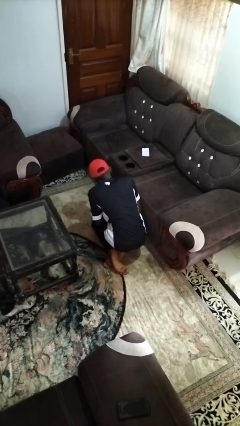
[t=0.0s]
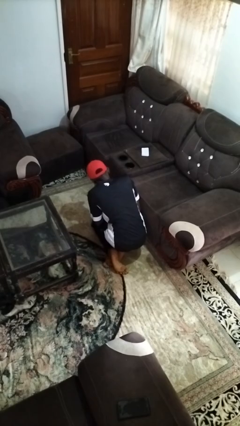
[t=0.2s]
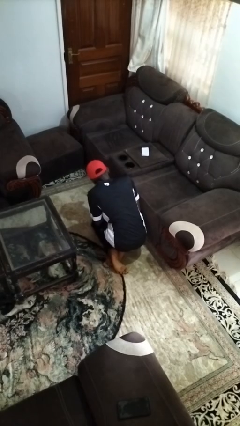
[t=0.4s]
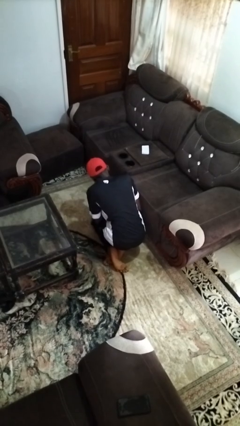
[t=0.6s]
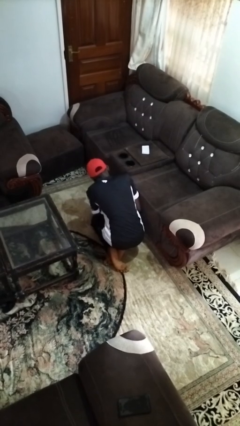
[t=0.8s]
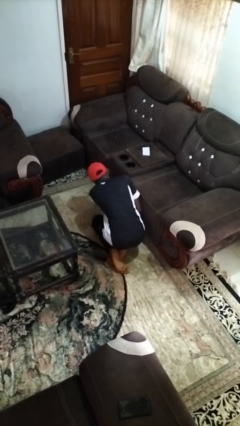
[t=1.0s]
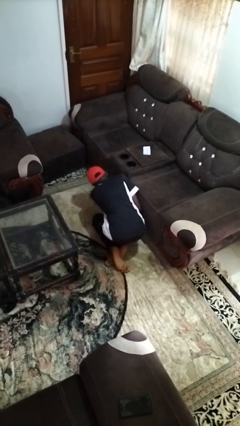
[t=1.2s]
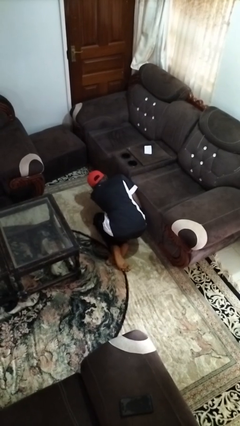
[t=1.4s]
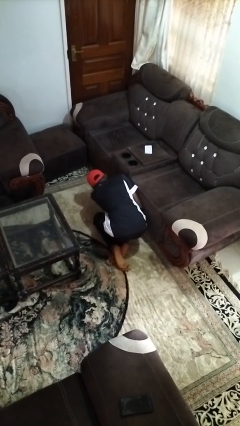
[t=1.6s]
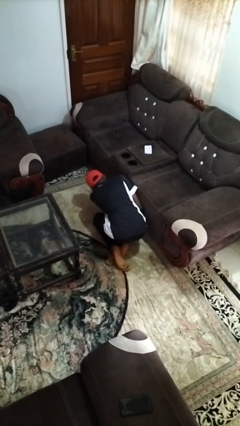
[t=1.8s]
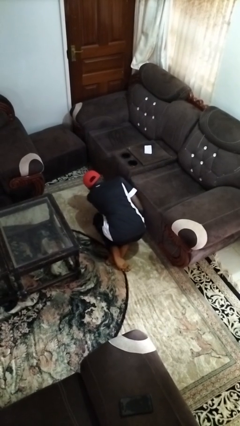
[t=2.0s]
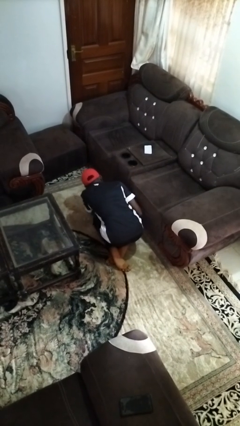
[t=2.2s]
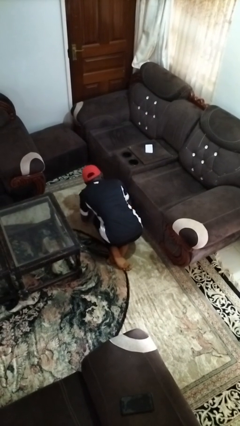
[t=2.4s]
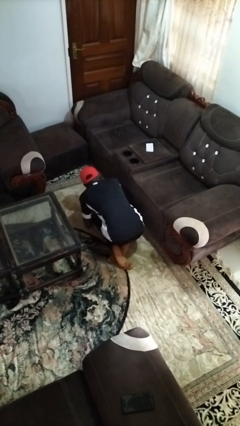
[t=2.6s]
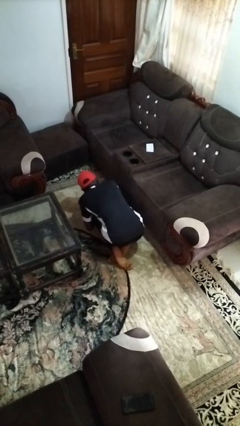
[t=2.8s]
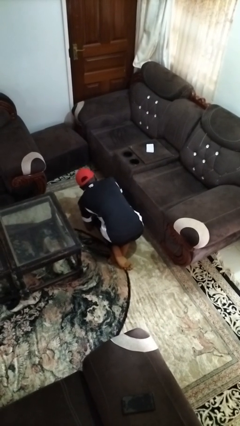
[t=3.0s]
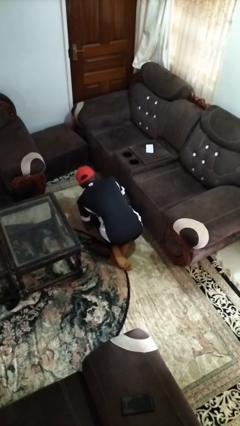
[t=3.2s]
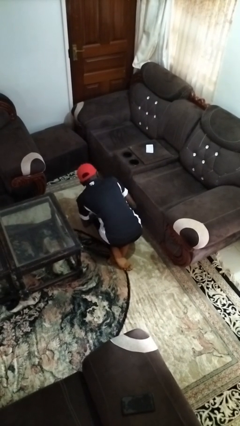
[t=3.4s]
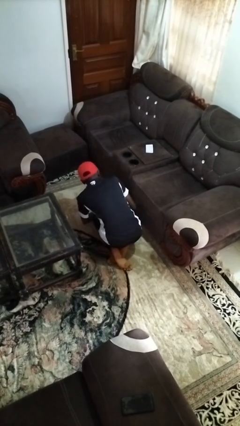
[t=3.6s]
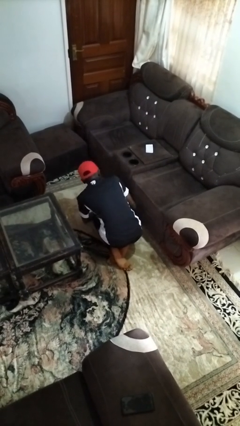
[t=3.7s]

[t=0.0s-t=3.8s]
person searches under couch

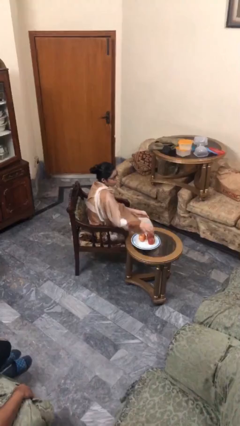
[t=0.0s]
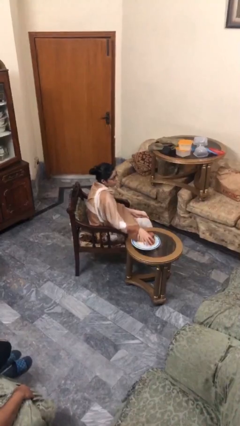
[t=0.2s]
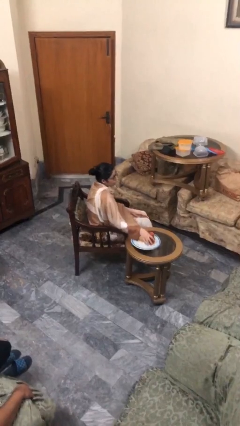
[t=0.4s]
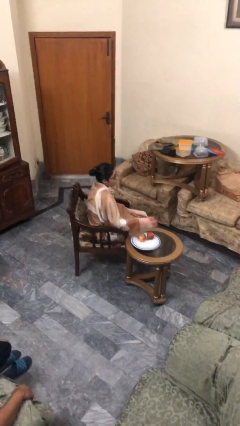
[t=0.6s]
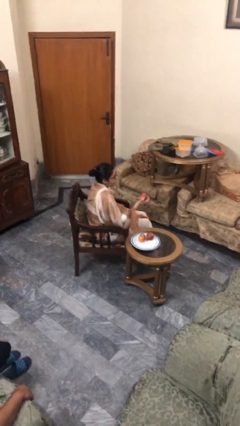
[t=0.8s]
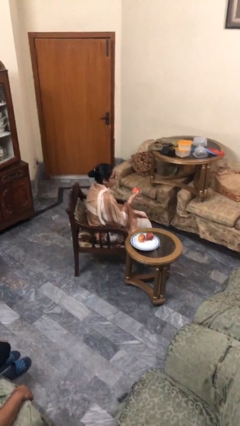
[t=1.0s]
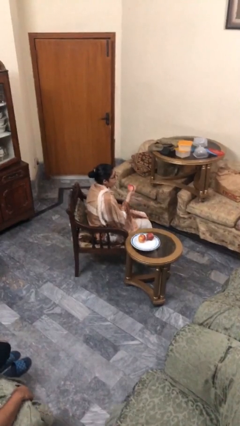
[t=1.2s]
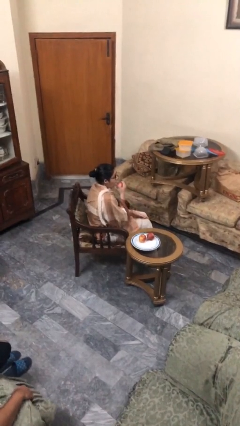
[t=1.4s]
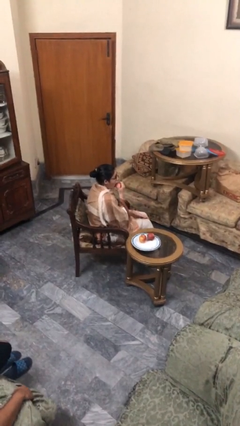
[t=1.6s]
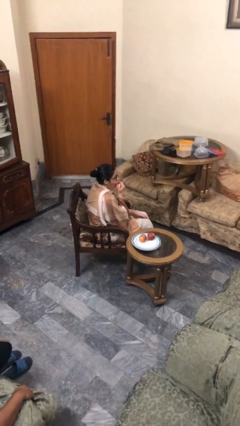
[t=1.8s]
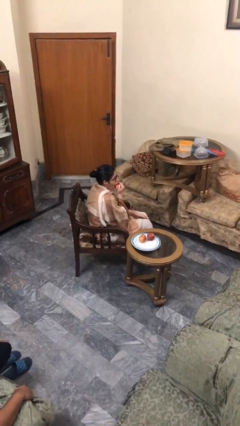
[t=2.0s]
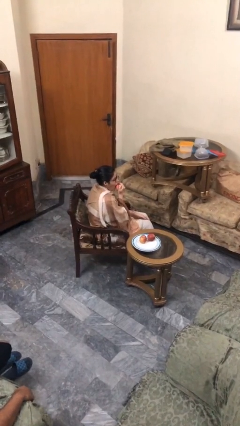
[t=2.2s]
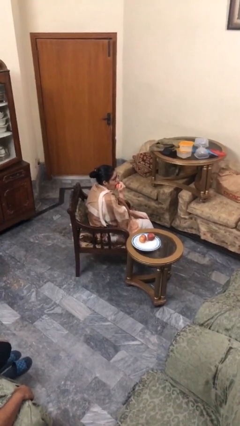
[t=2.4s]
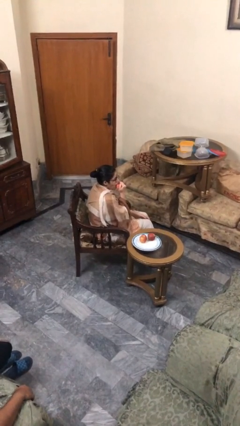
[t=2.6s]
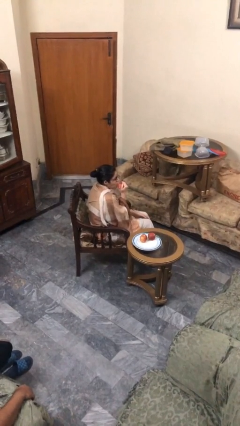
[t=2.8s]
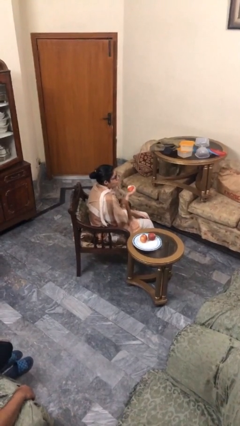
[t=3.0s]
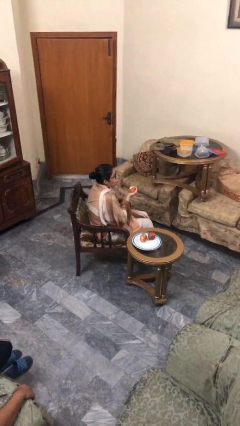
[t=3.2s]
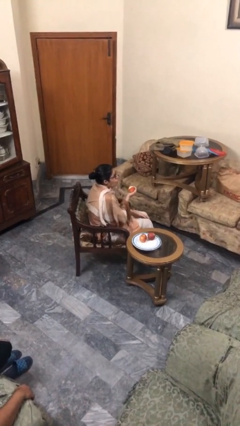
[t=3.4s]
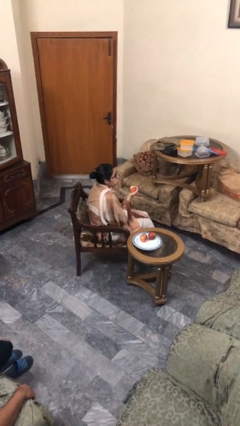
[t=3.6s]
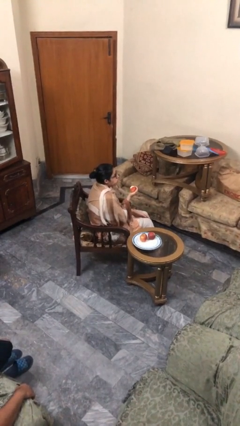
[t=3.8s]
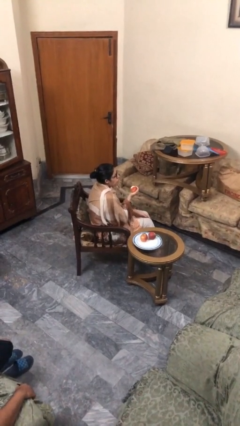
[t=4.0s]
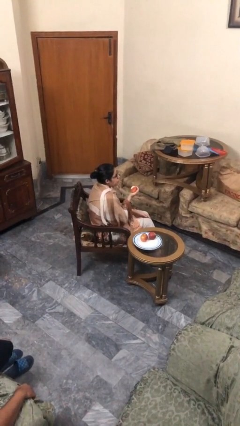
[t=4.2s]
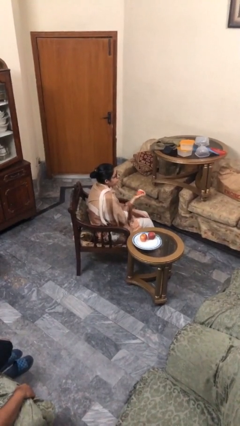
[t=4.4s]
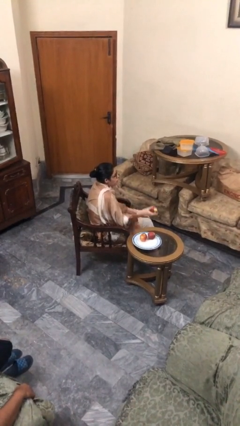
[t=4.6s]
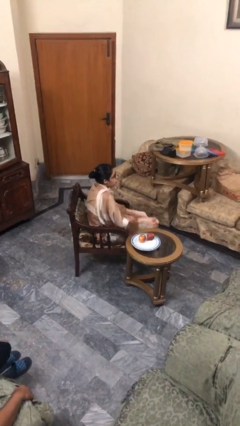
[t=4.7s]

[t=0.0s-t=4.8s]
person eats apple

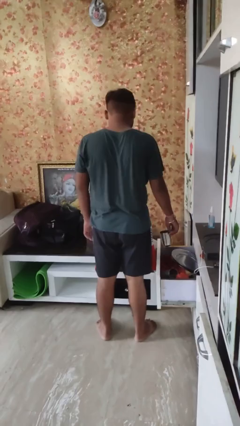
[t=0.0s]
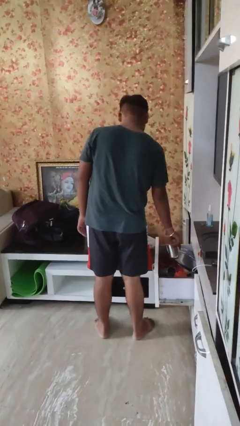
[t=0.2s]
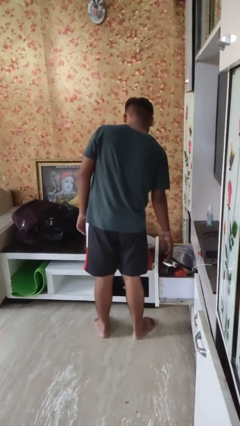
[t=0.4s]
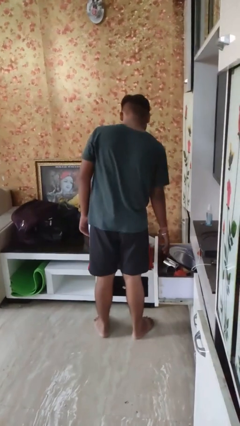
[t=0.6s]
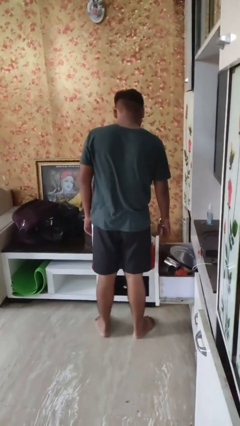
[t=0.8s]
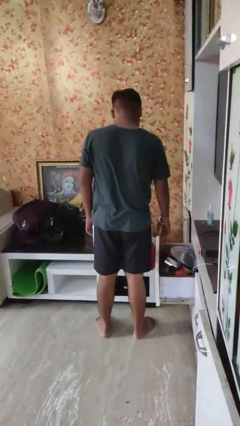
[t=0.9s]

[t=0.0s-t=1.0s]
person puts object into kitchen drawer

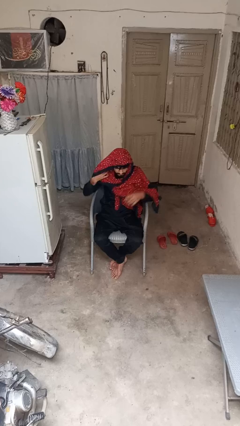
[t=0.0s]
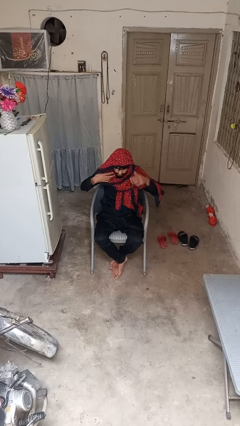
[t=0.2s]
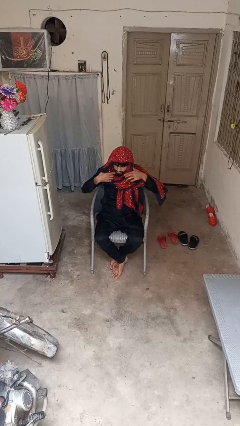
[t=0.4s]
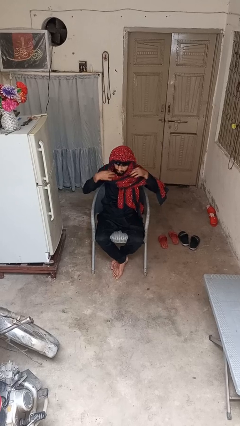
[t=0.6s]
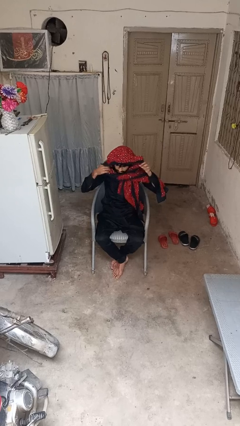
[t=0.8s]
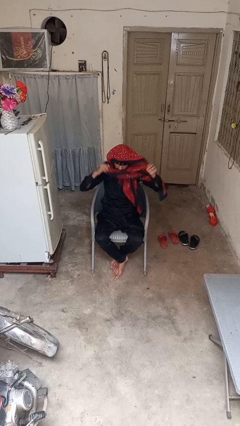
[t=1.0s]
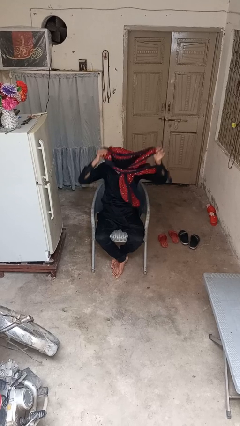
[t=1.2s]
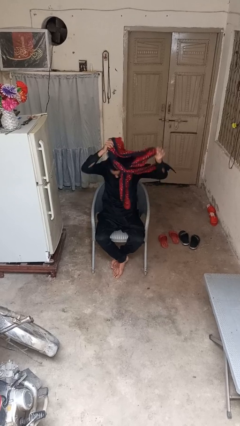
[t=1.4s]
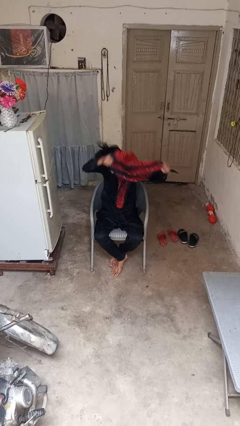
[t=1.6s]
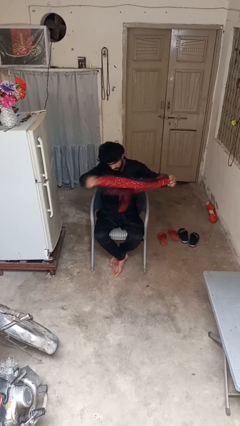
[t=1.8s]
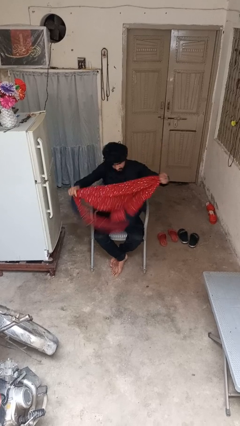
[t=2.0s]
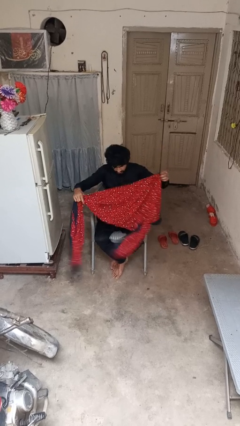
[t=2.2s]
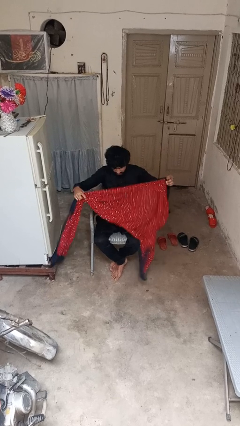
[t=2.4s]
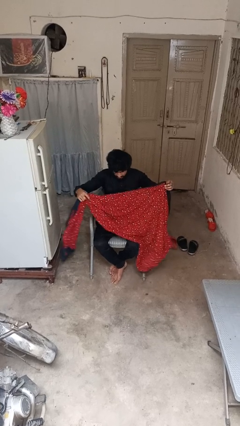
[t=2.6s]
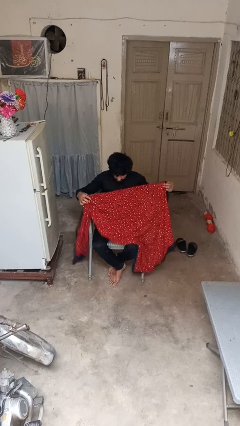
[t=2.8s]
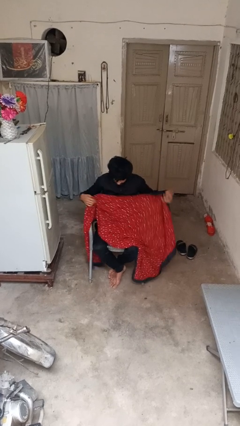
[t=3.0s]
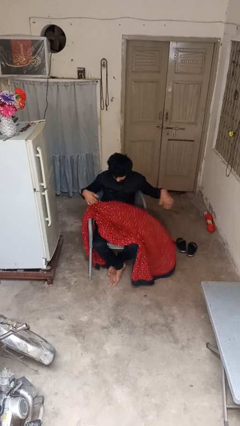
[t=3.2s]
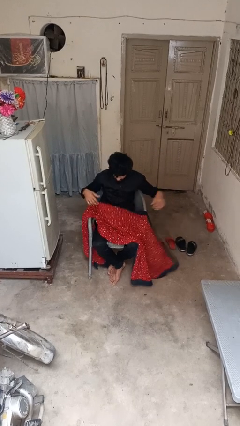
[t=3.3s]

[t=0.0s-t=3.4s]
person takes off scarf

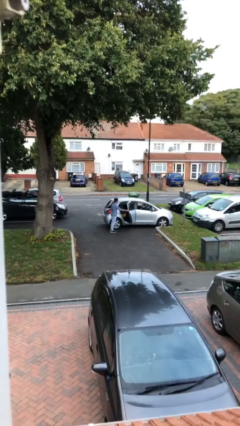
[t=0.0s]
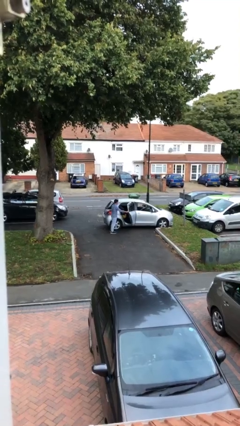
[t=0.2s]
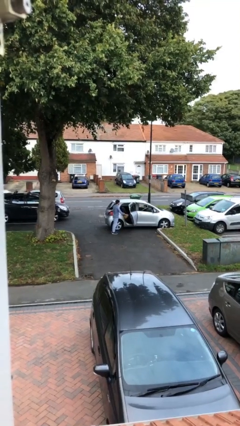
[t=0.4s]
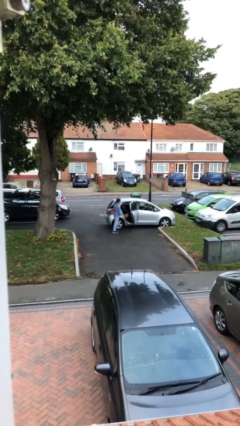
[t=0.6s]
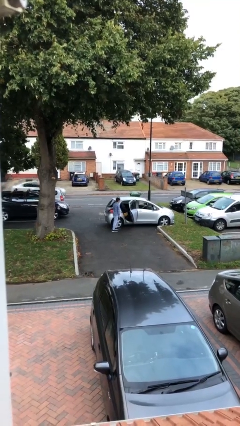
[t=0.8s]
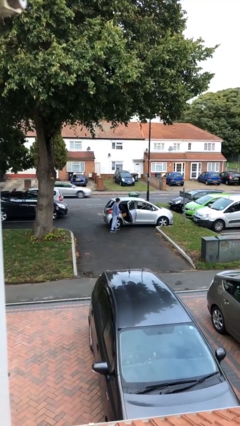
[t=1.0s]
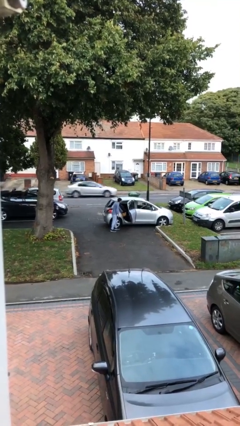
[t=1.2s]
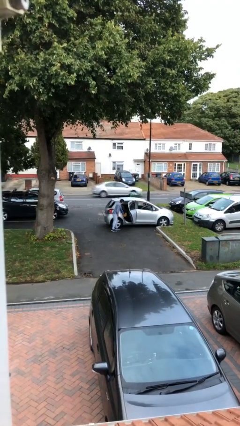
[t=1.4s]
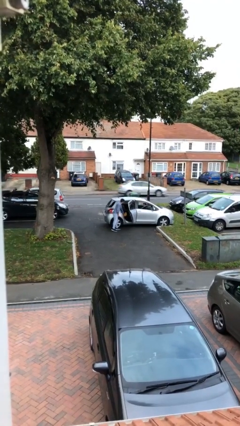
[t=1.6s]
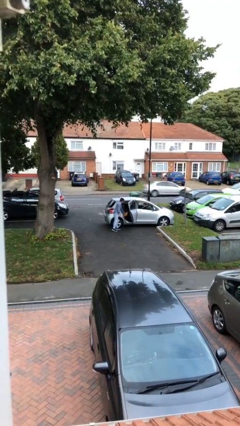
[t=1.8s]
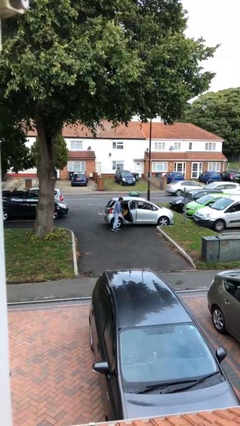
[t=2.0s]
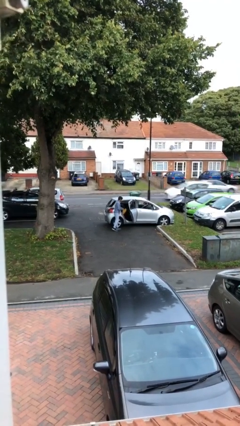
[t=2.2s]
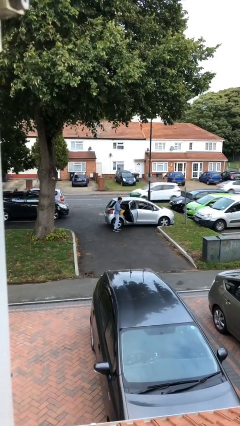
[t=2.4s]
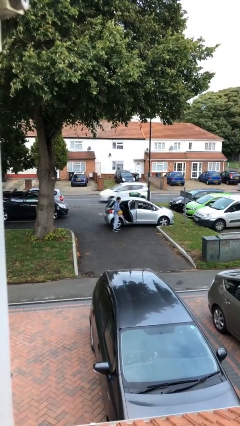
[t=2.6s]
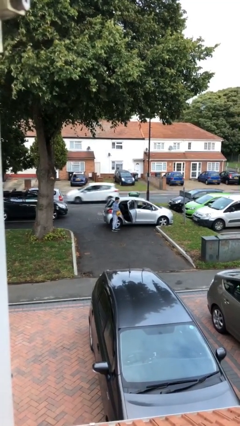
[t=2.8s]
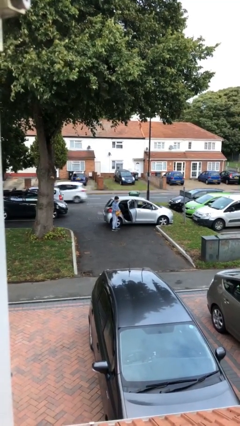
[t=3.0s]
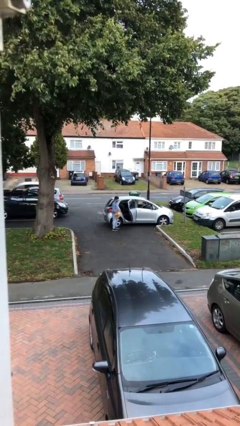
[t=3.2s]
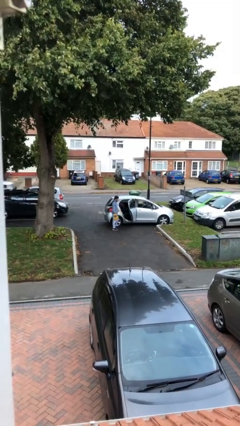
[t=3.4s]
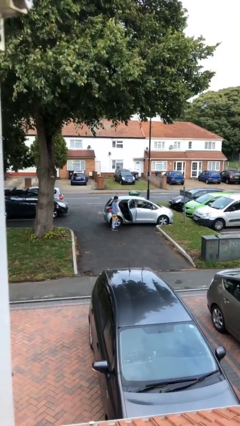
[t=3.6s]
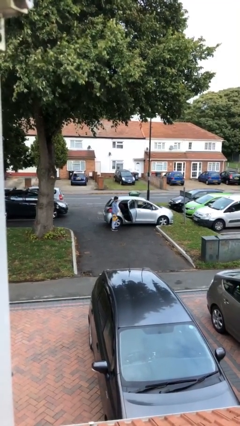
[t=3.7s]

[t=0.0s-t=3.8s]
person unloads car

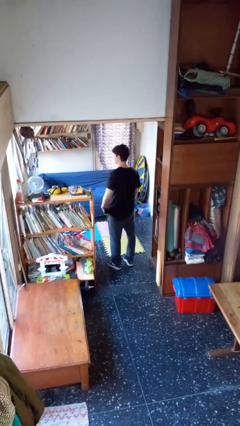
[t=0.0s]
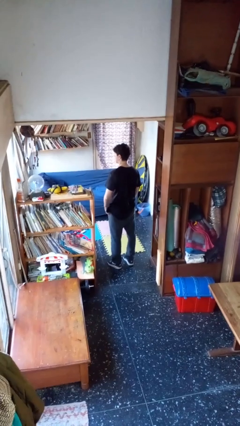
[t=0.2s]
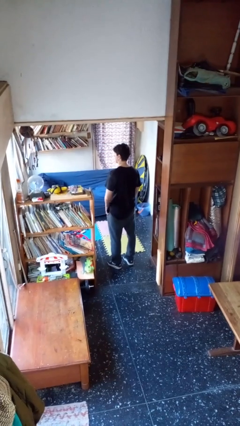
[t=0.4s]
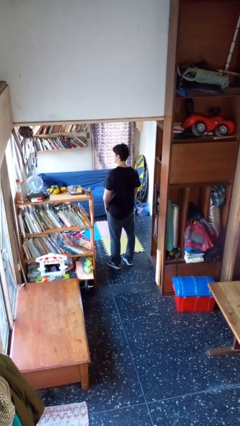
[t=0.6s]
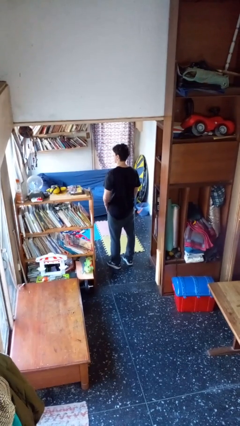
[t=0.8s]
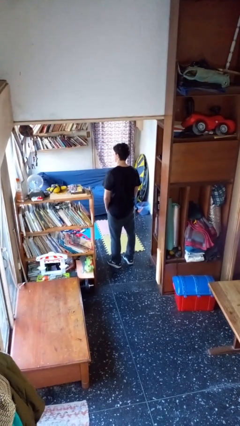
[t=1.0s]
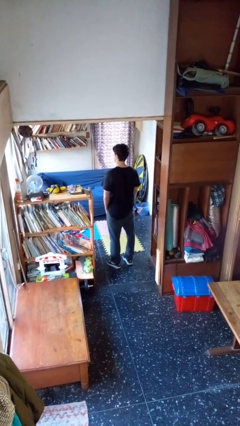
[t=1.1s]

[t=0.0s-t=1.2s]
person puts phone into pocket
